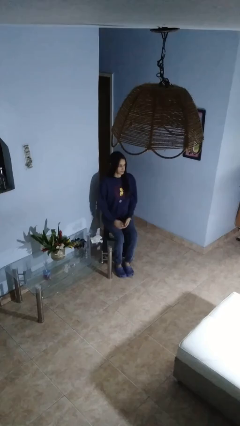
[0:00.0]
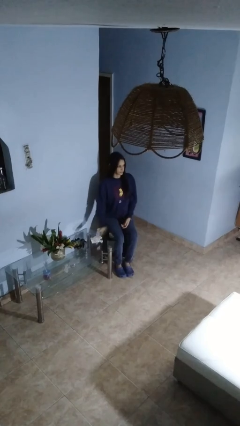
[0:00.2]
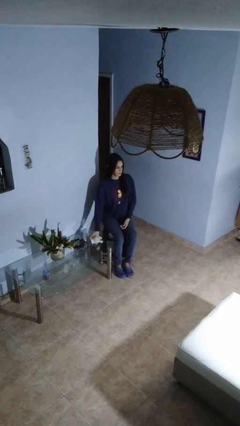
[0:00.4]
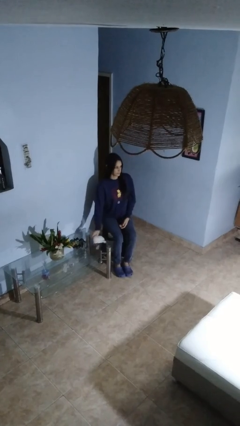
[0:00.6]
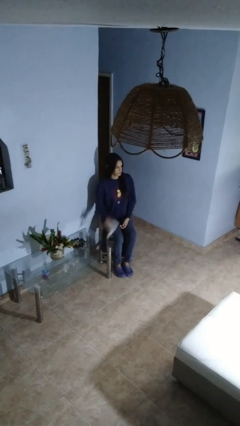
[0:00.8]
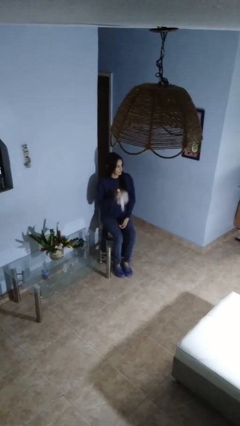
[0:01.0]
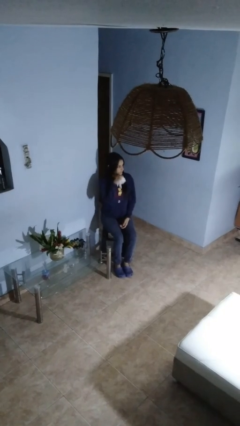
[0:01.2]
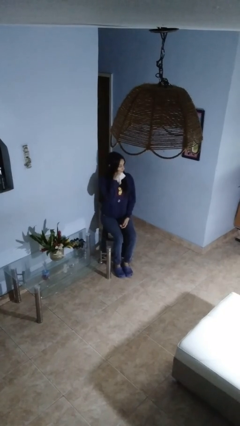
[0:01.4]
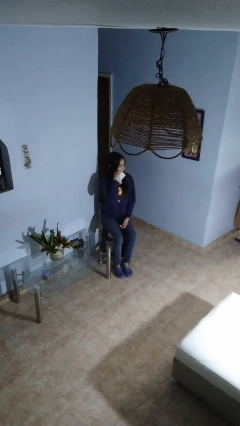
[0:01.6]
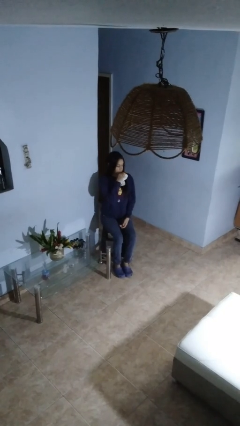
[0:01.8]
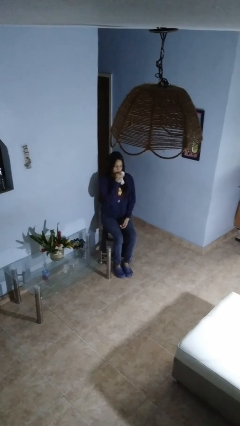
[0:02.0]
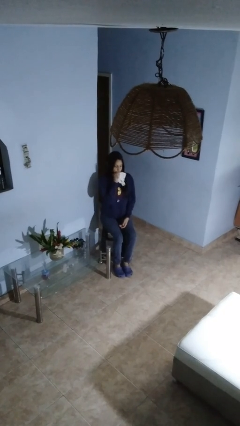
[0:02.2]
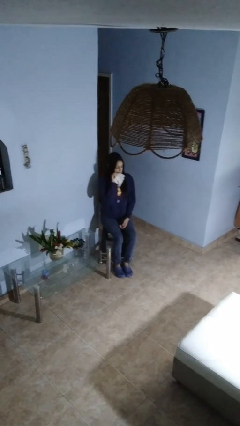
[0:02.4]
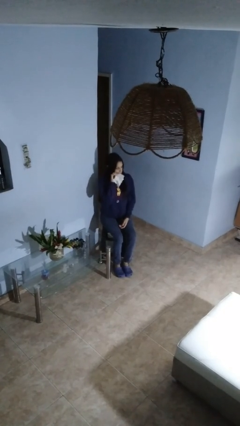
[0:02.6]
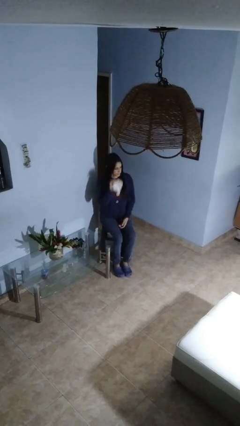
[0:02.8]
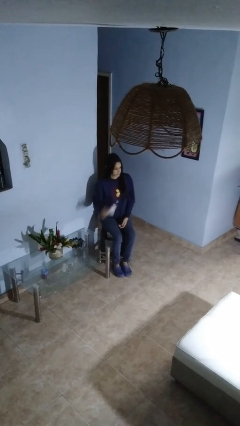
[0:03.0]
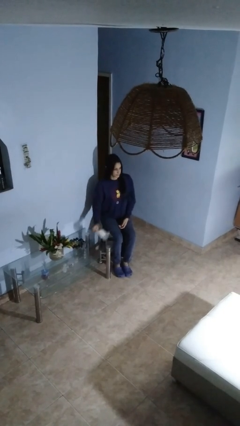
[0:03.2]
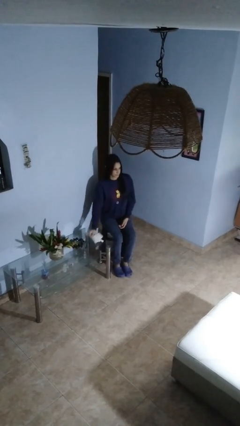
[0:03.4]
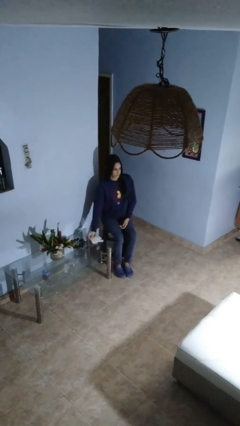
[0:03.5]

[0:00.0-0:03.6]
person wipes mouth with napkin

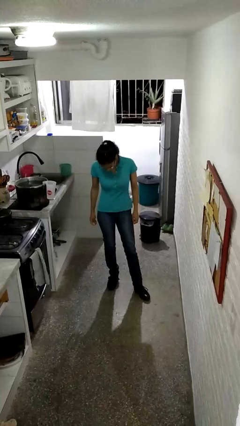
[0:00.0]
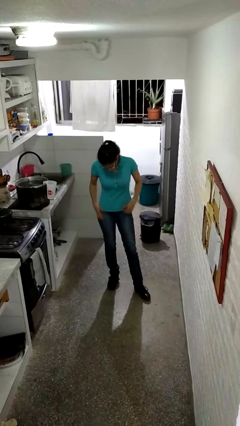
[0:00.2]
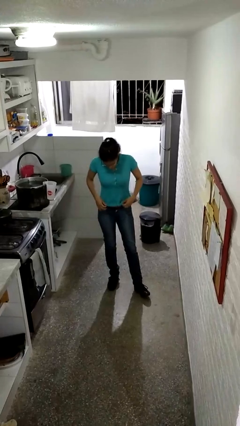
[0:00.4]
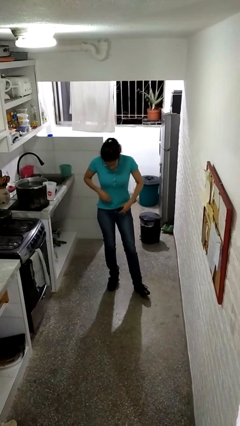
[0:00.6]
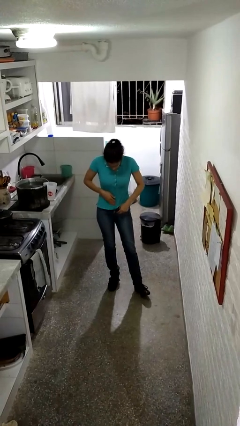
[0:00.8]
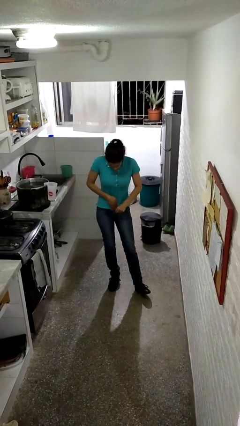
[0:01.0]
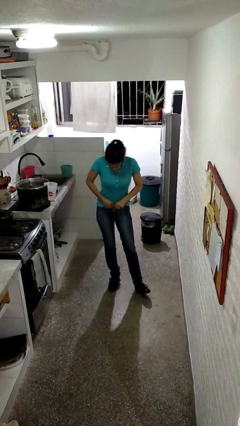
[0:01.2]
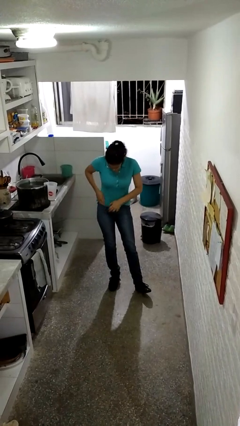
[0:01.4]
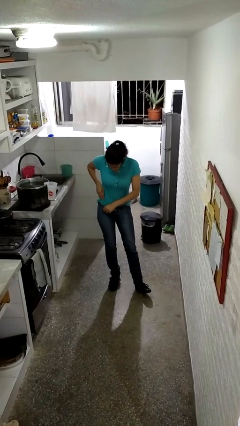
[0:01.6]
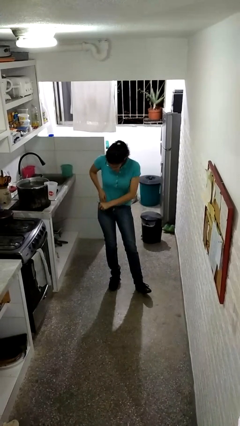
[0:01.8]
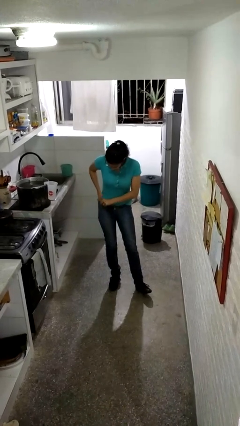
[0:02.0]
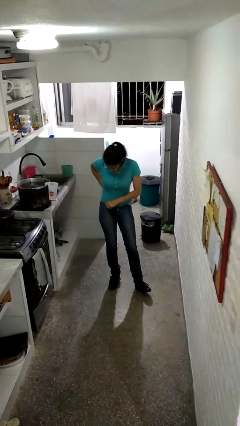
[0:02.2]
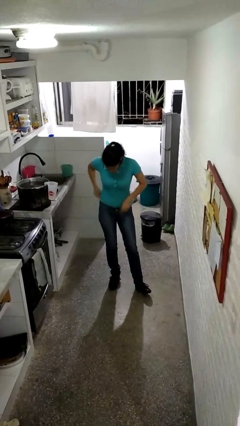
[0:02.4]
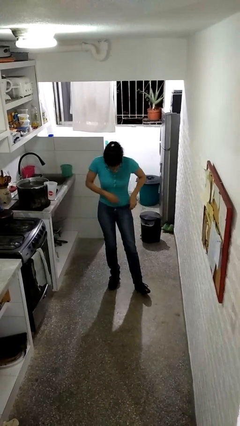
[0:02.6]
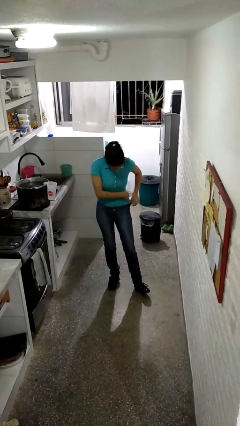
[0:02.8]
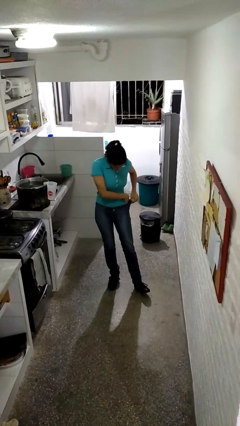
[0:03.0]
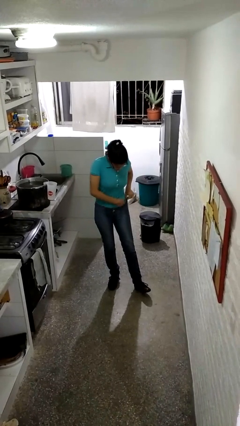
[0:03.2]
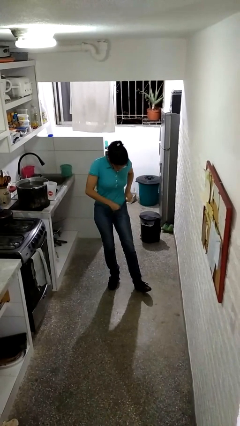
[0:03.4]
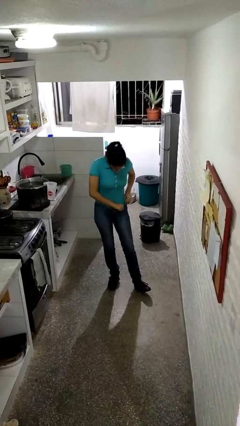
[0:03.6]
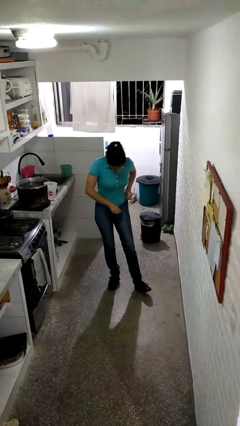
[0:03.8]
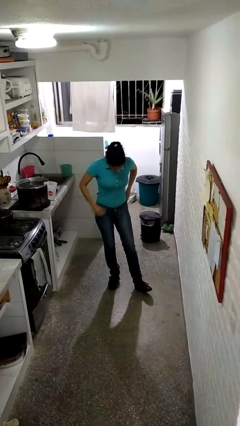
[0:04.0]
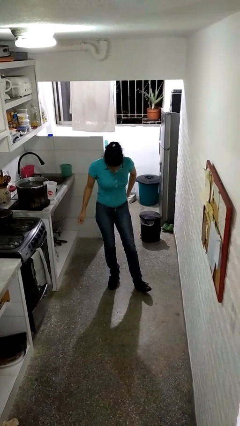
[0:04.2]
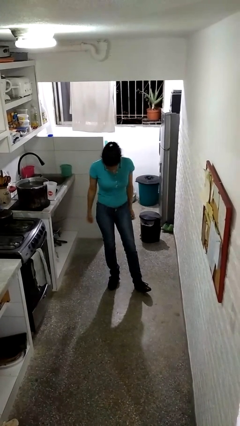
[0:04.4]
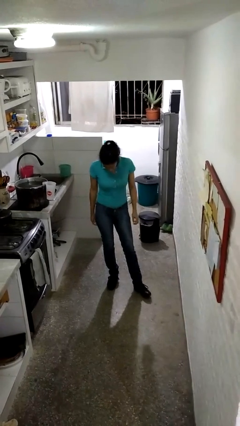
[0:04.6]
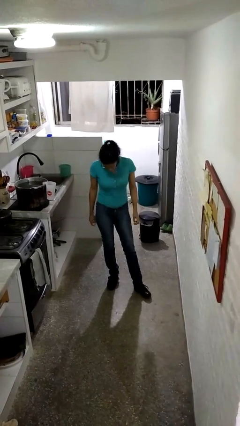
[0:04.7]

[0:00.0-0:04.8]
person tucks in shirt

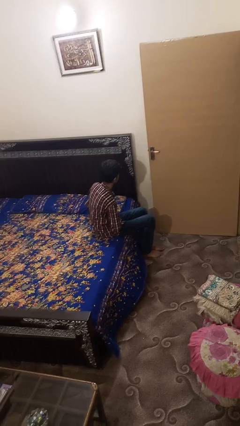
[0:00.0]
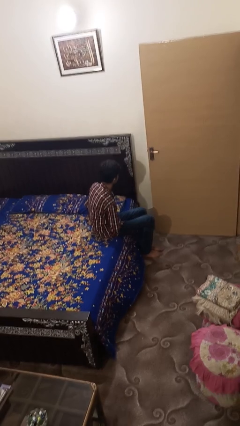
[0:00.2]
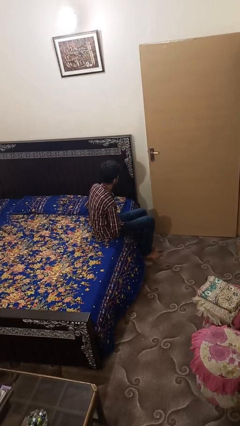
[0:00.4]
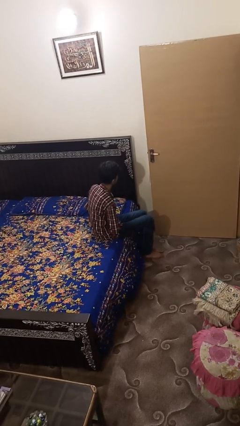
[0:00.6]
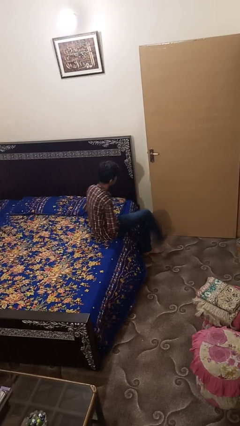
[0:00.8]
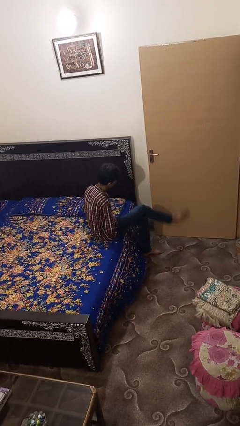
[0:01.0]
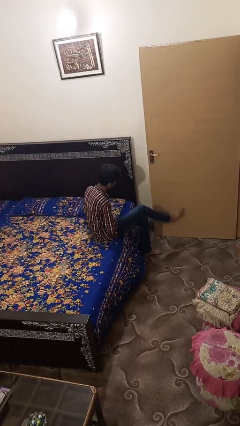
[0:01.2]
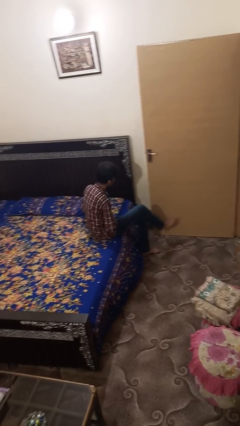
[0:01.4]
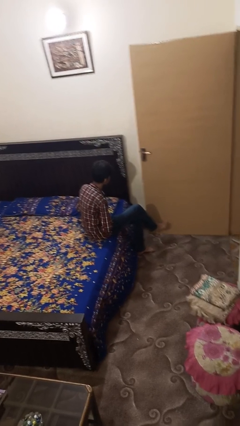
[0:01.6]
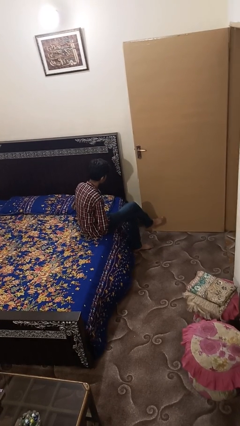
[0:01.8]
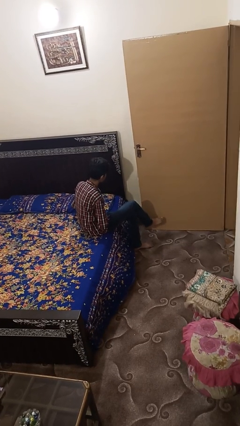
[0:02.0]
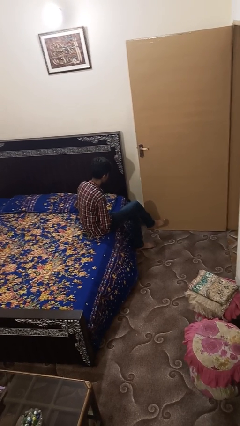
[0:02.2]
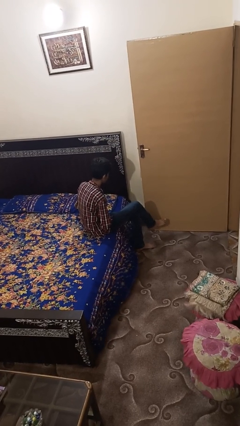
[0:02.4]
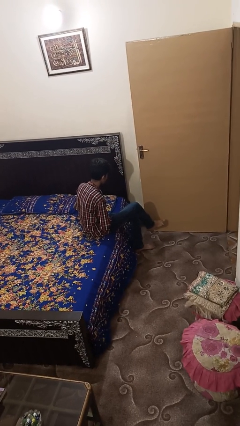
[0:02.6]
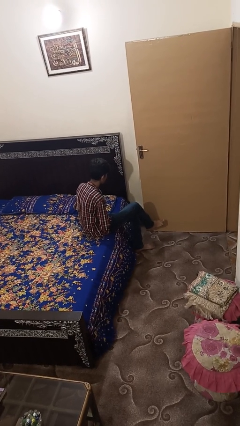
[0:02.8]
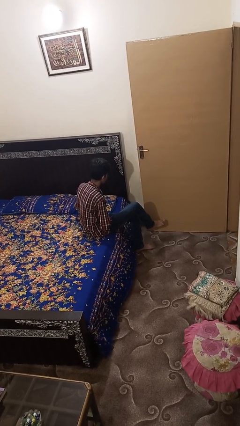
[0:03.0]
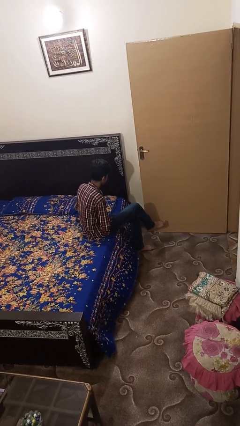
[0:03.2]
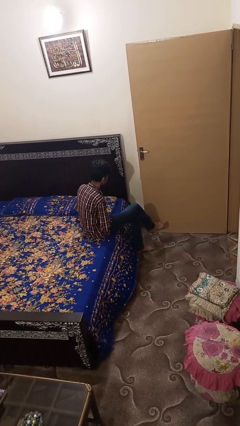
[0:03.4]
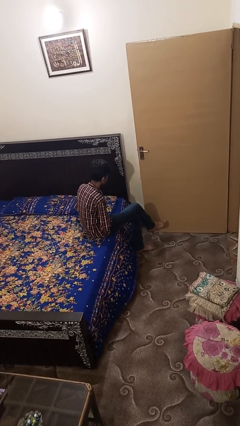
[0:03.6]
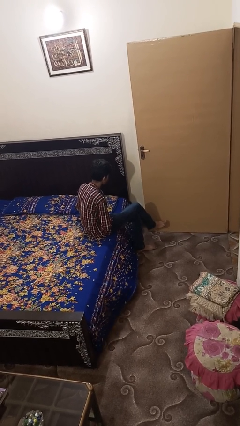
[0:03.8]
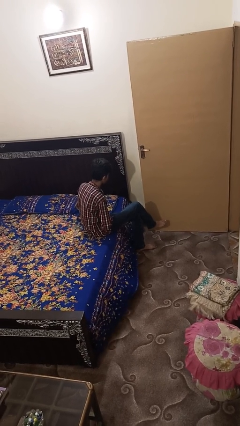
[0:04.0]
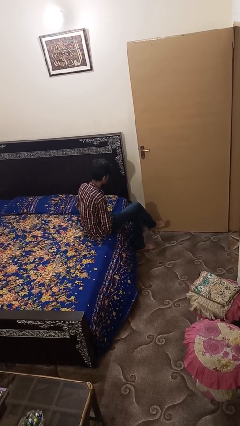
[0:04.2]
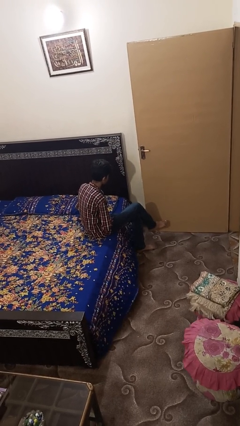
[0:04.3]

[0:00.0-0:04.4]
person crosses legs

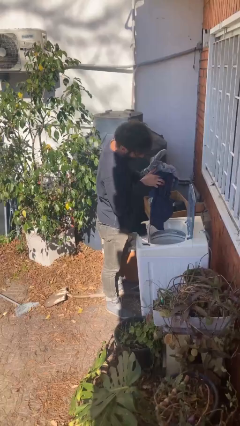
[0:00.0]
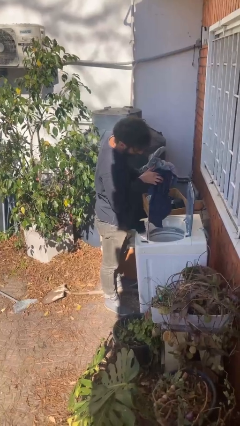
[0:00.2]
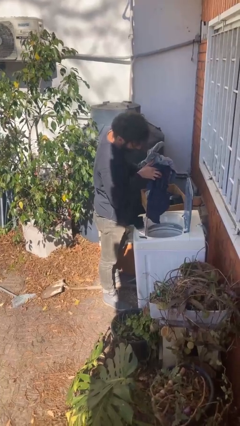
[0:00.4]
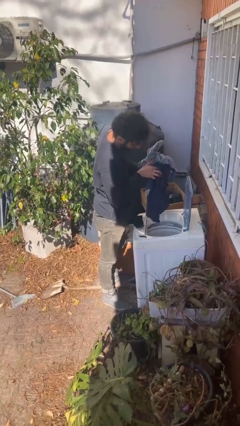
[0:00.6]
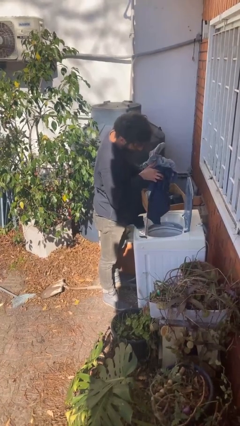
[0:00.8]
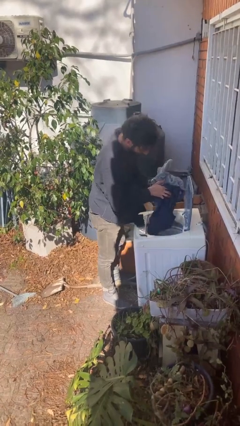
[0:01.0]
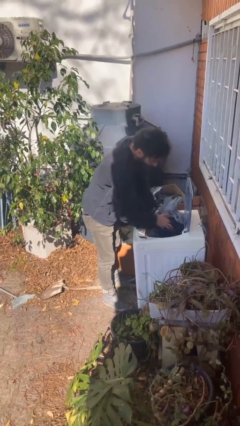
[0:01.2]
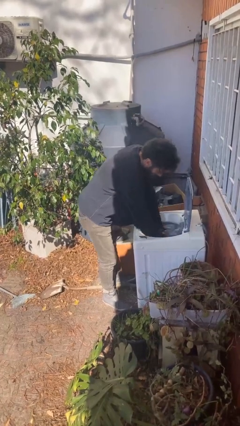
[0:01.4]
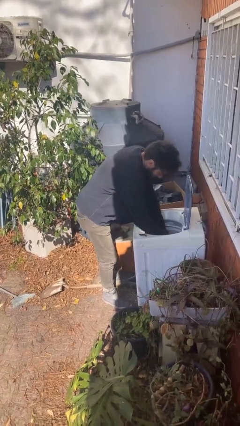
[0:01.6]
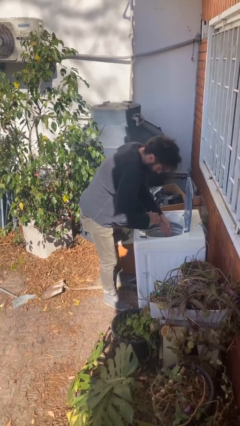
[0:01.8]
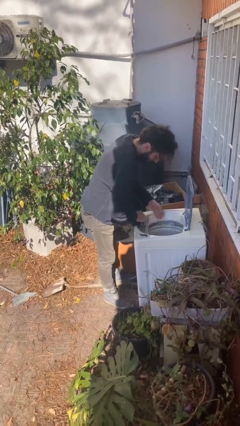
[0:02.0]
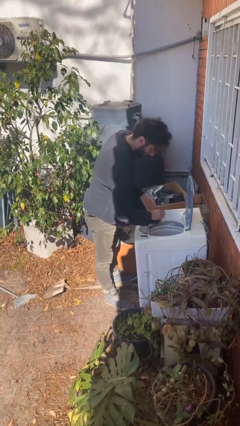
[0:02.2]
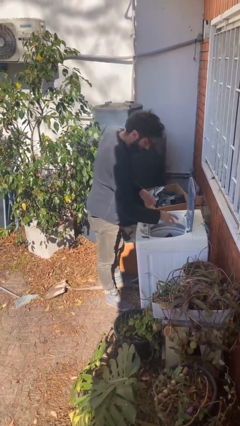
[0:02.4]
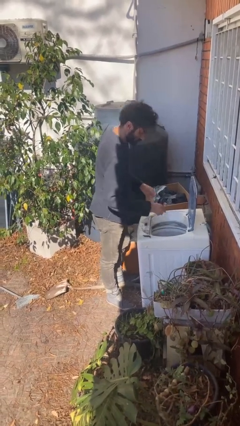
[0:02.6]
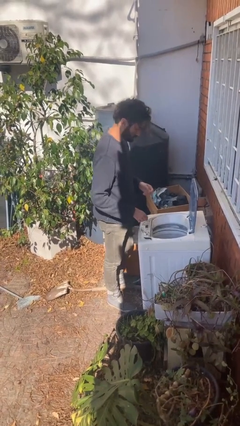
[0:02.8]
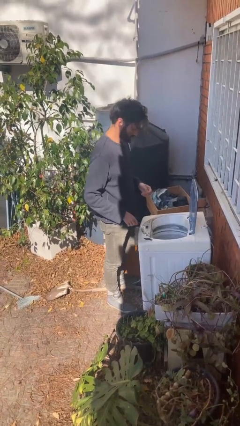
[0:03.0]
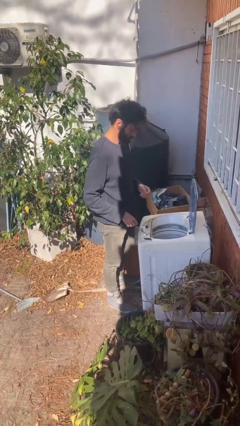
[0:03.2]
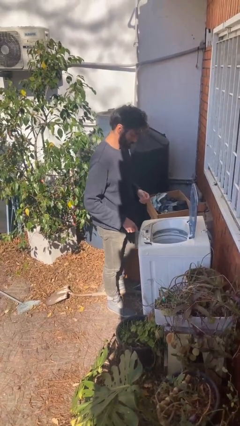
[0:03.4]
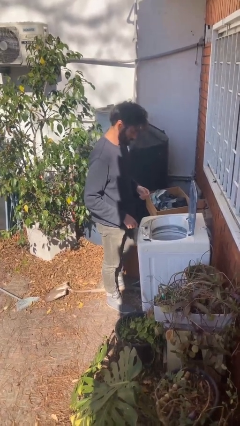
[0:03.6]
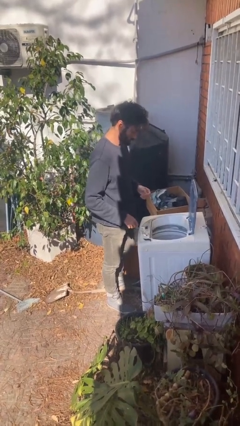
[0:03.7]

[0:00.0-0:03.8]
person loads clotheswasher

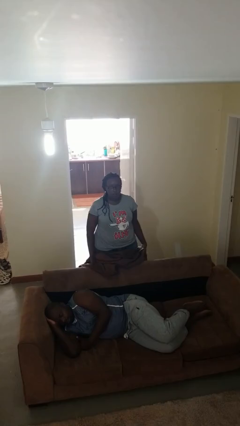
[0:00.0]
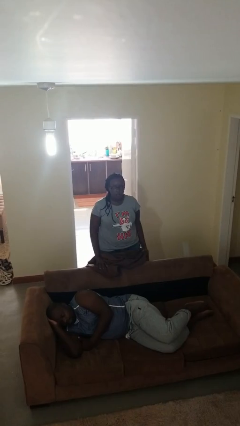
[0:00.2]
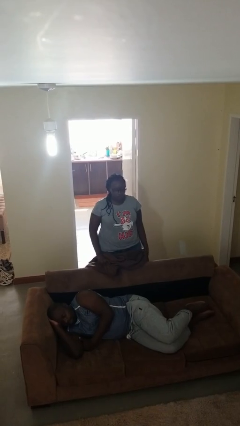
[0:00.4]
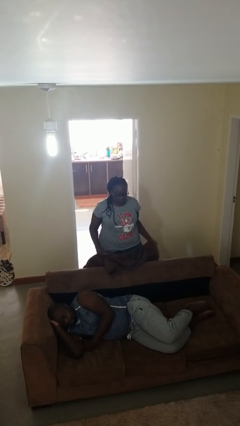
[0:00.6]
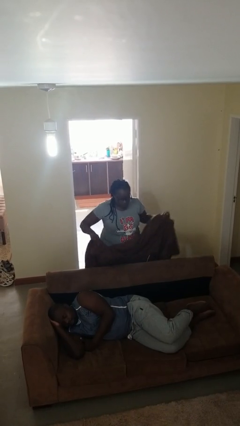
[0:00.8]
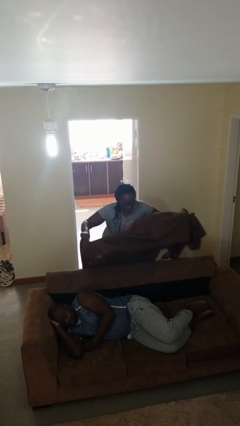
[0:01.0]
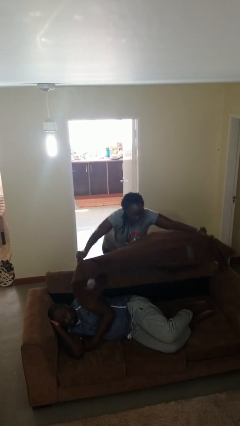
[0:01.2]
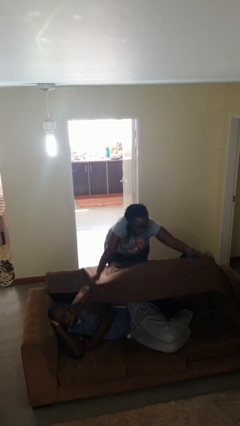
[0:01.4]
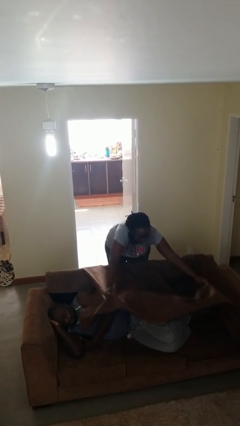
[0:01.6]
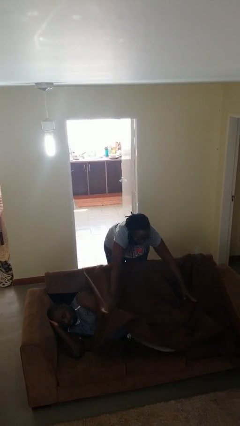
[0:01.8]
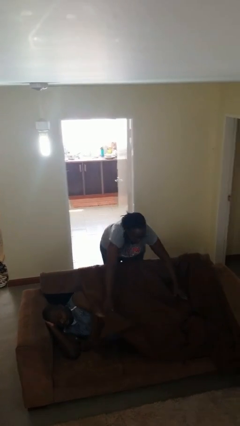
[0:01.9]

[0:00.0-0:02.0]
person covers friend with blanket
